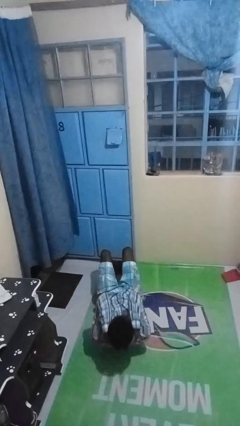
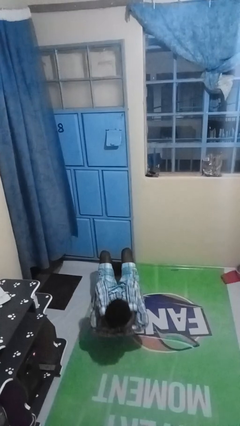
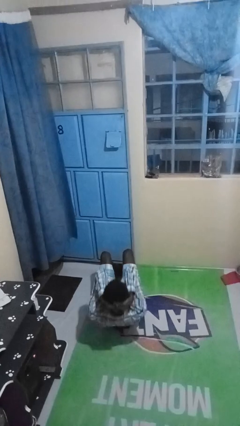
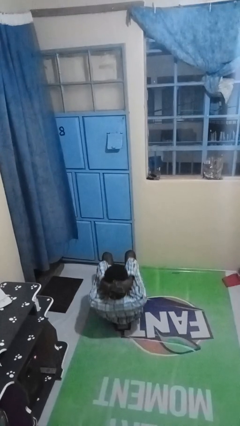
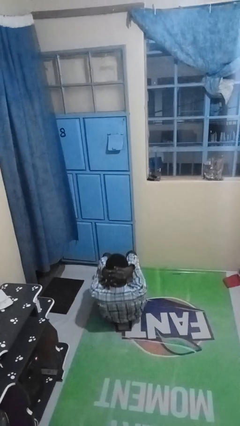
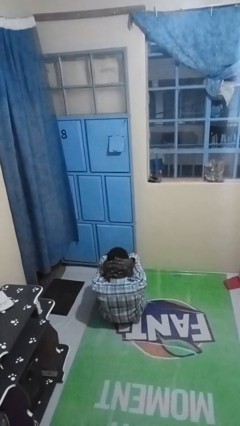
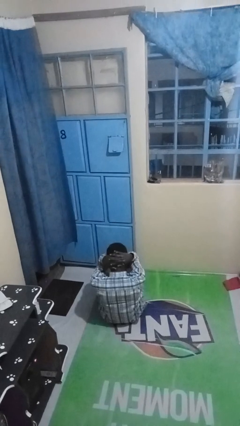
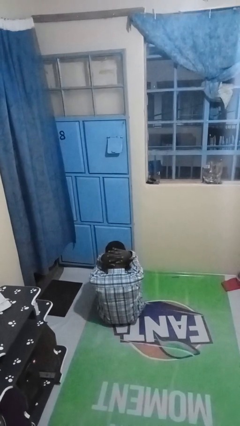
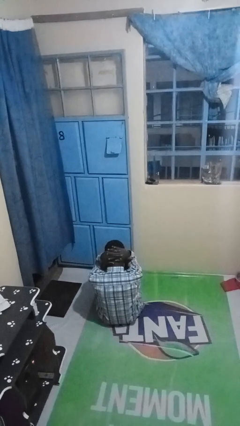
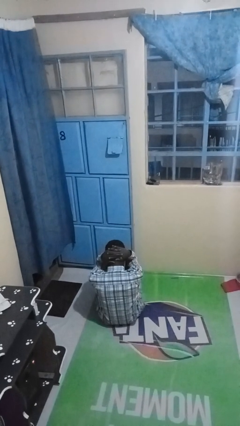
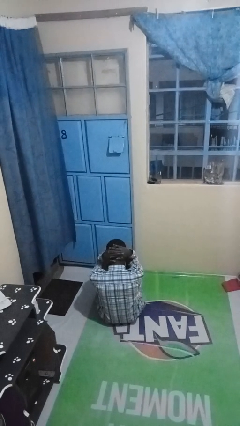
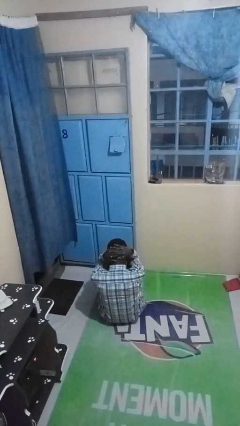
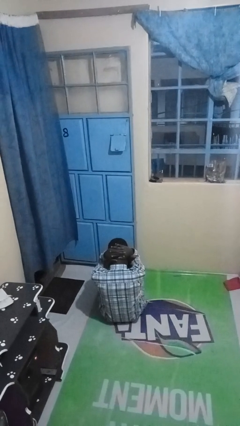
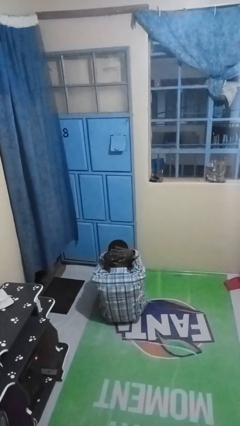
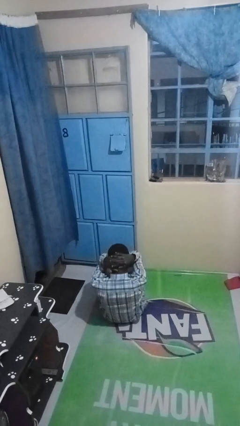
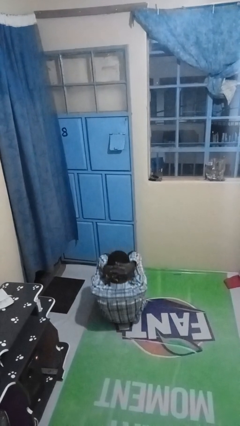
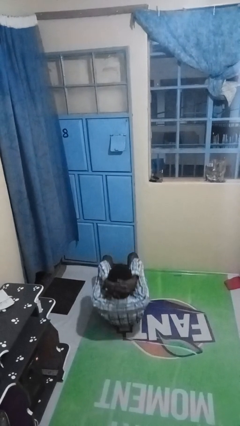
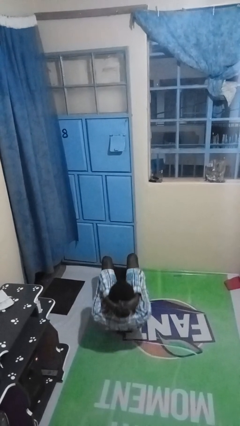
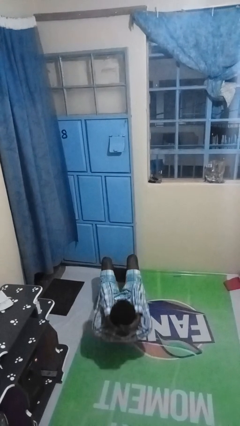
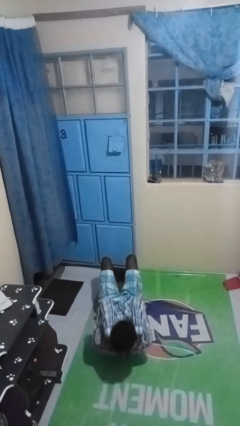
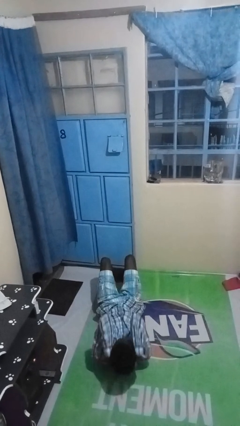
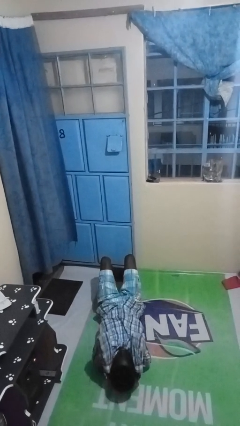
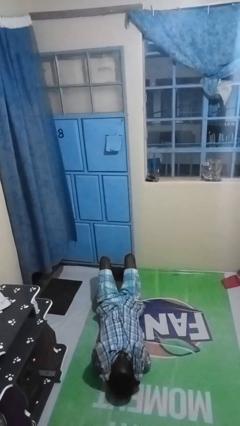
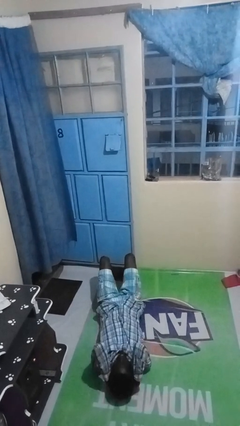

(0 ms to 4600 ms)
person exercises with situp

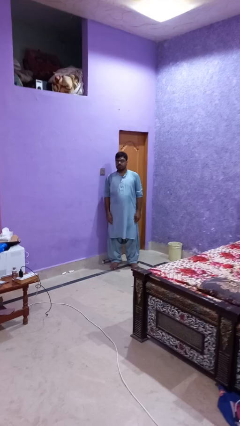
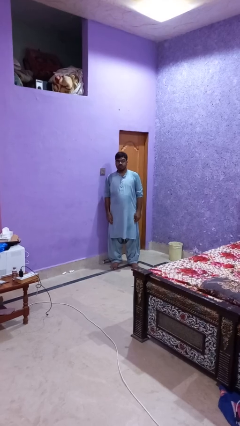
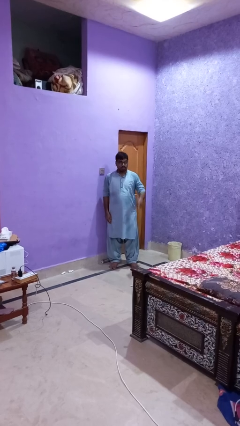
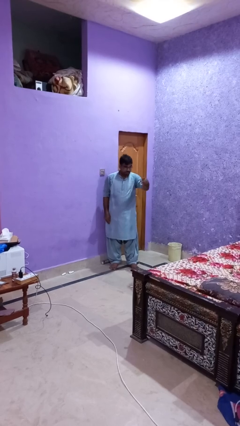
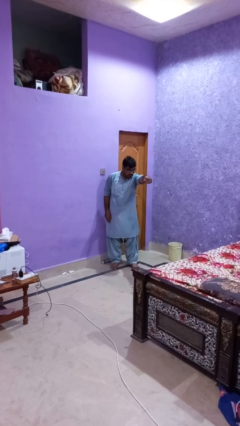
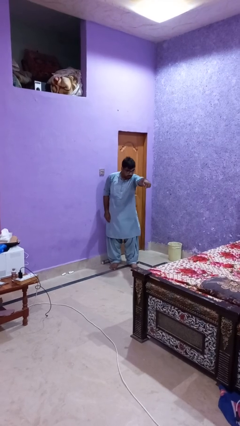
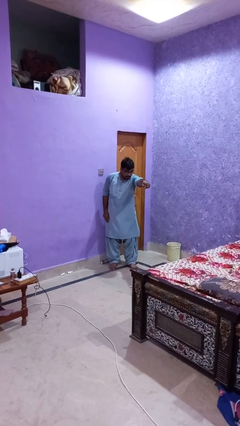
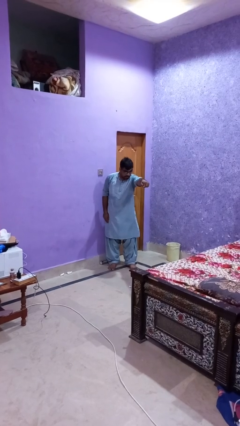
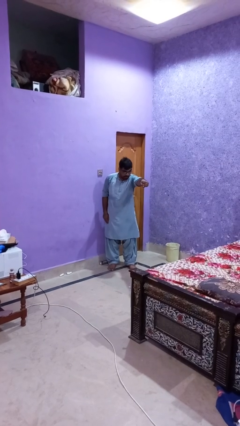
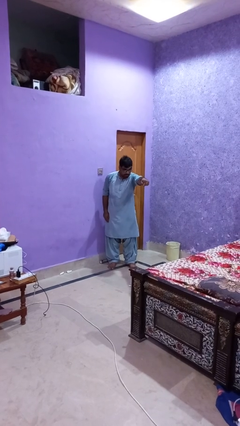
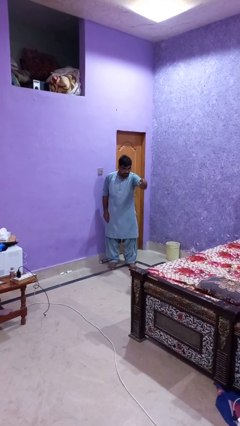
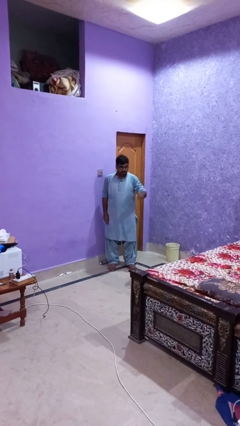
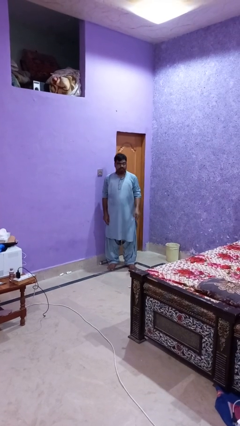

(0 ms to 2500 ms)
person points at person

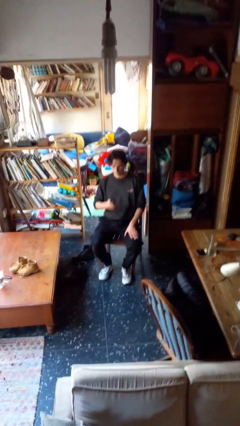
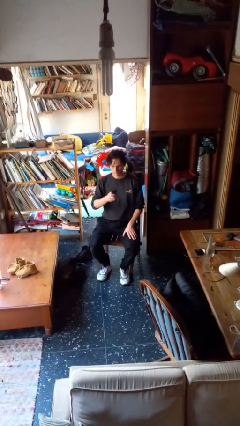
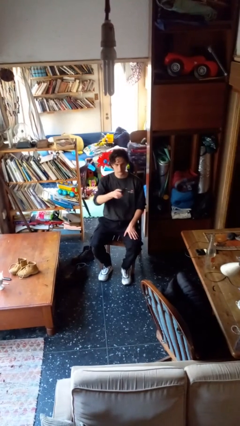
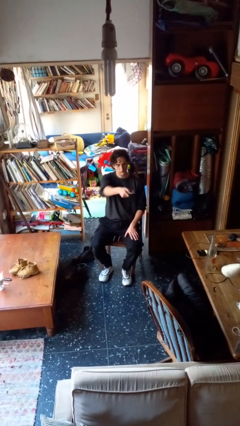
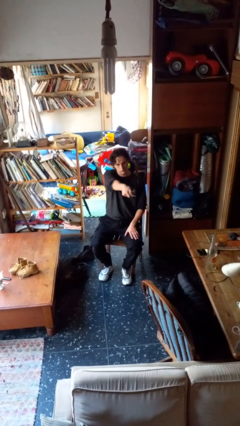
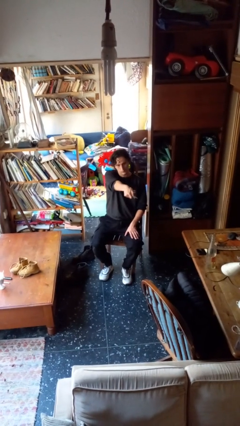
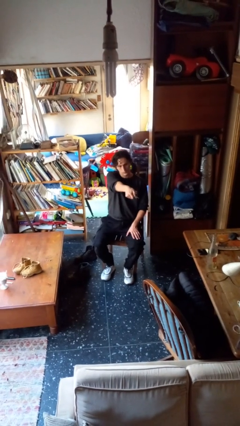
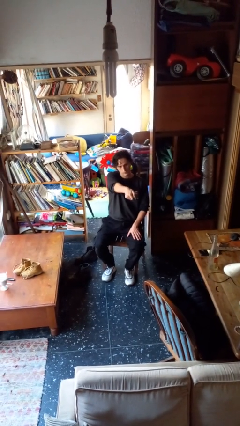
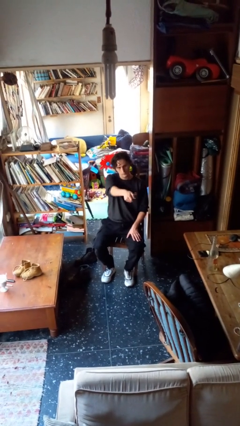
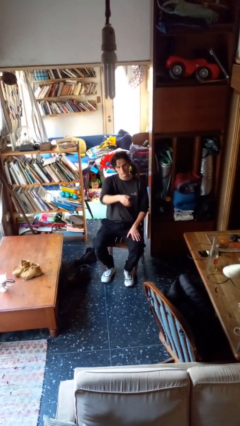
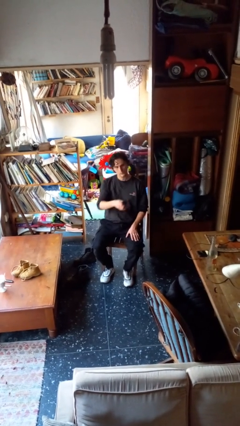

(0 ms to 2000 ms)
person uses television remote

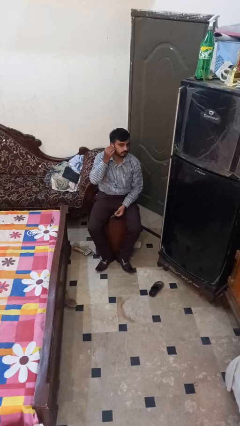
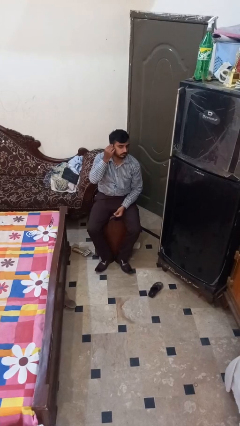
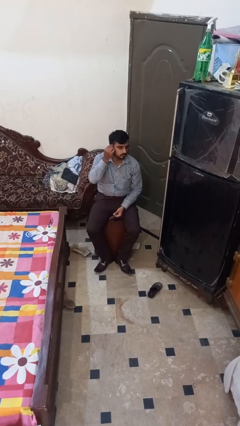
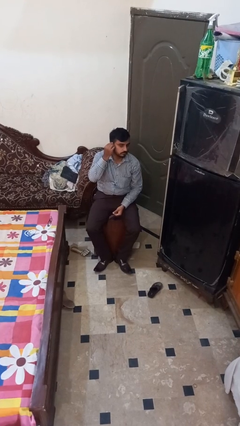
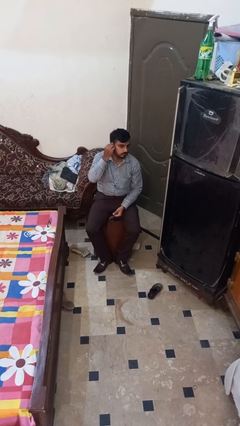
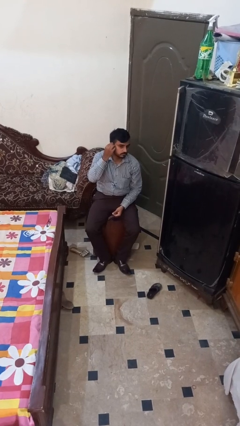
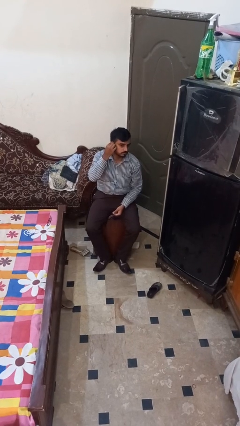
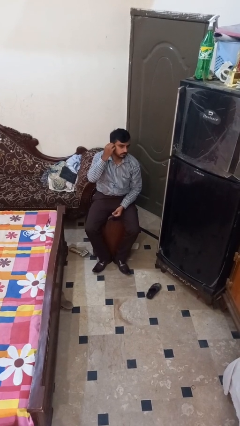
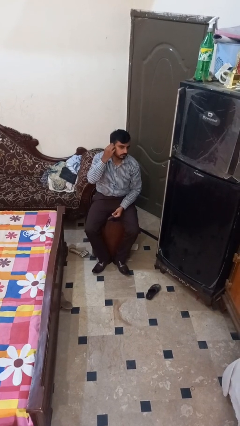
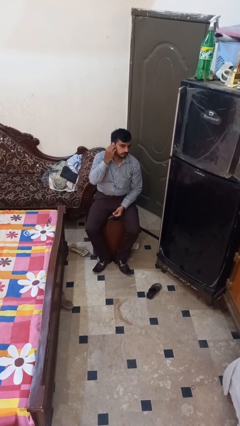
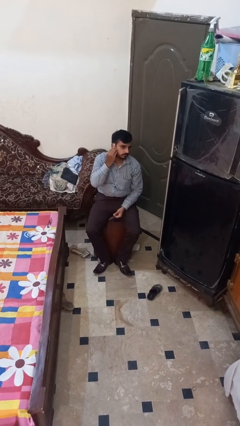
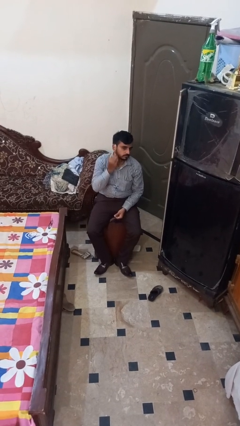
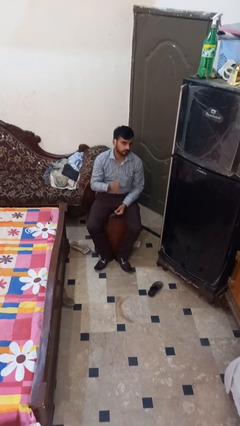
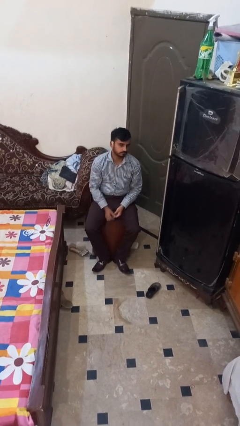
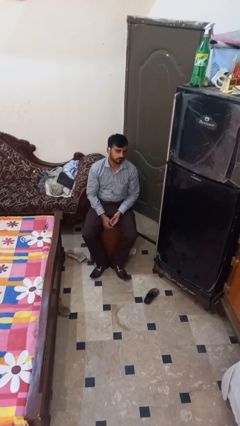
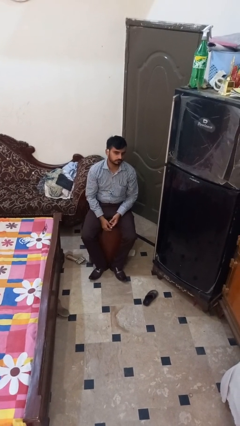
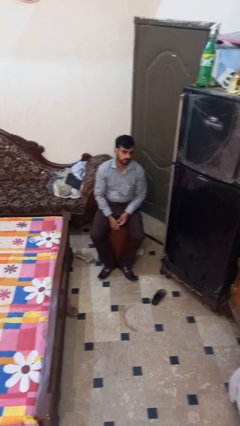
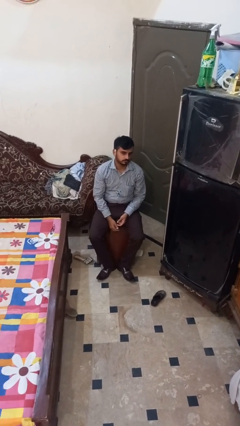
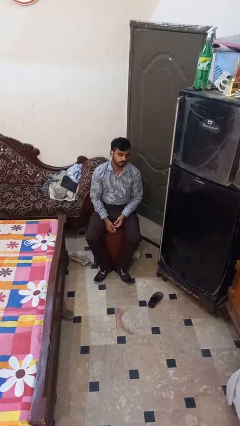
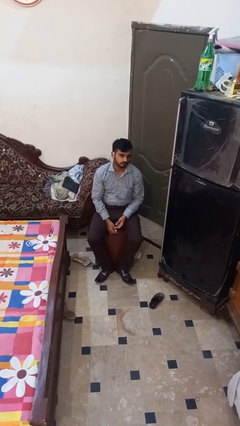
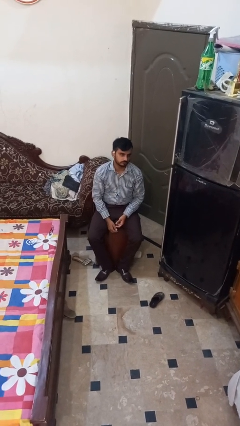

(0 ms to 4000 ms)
person puts on earrings

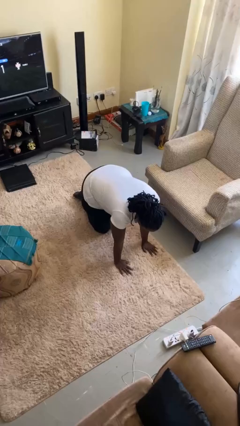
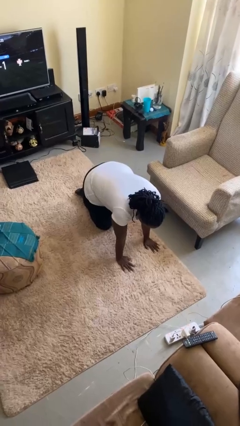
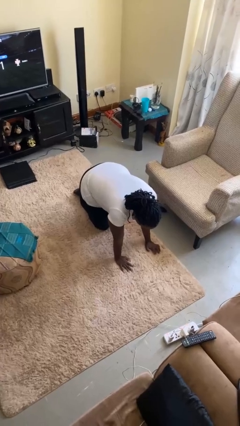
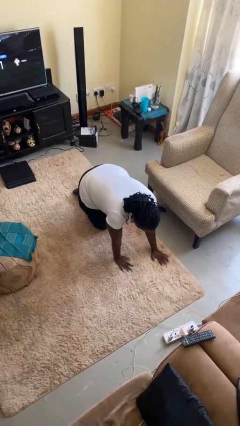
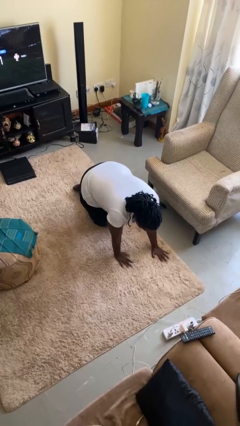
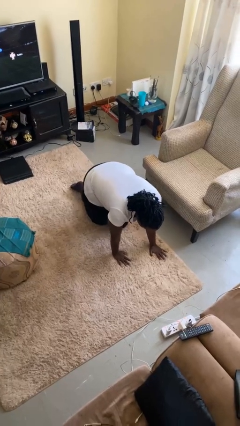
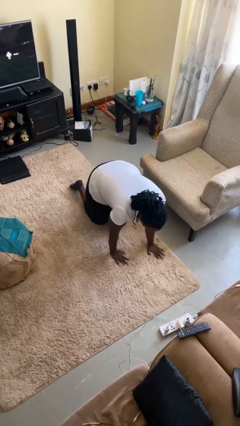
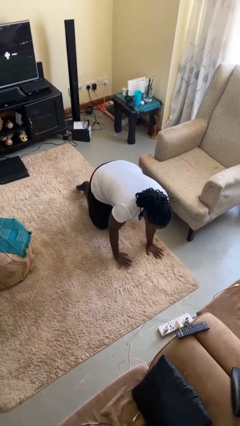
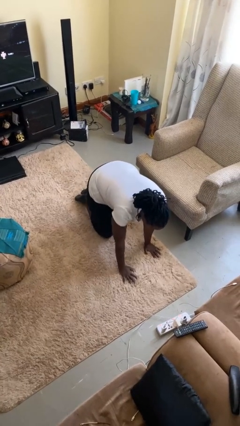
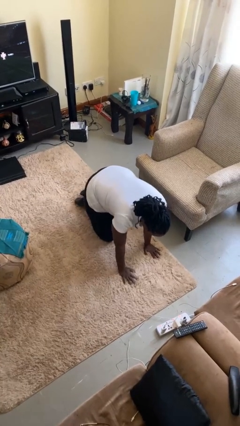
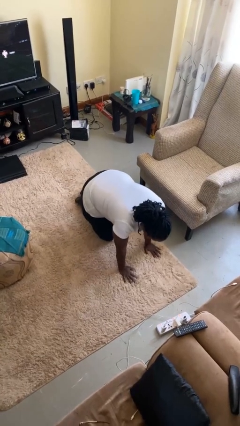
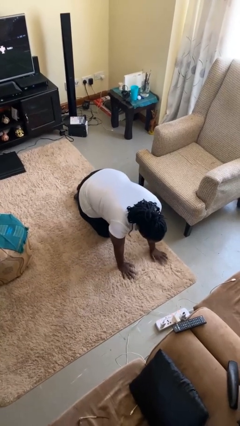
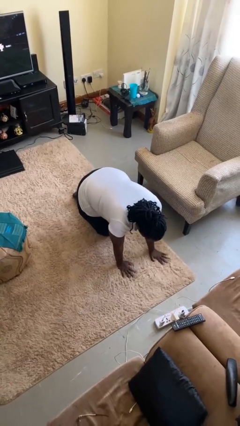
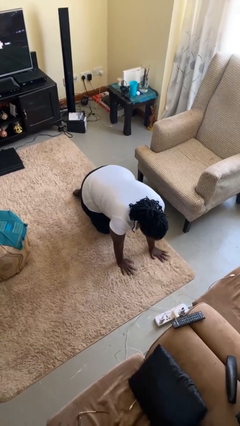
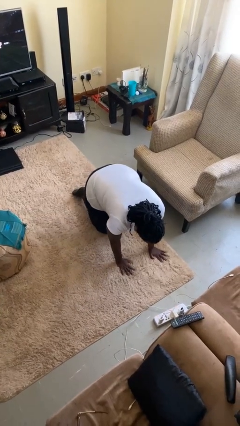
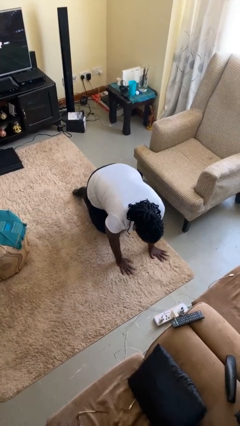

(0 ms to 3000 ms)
person crawls

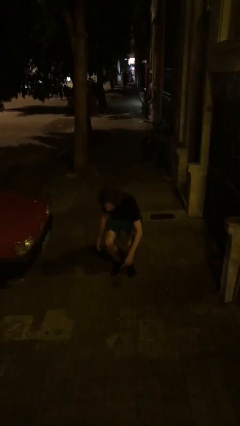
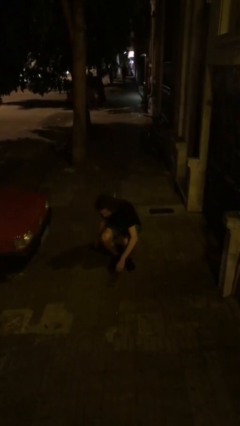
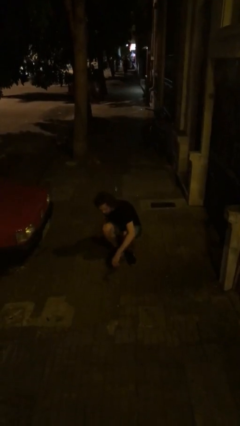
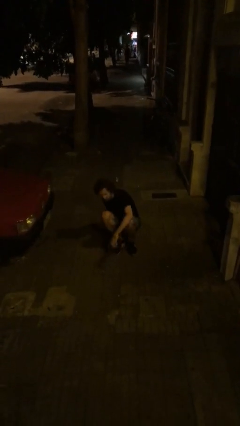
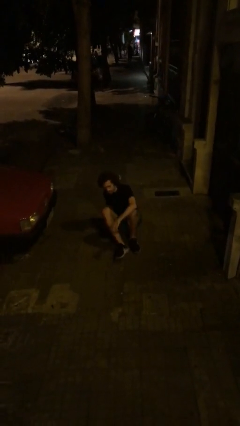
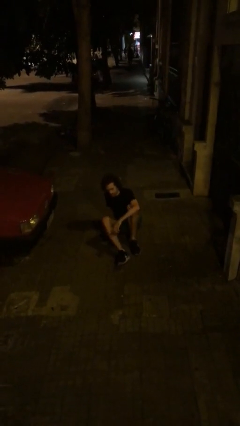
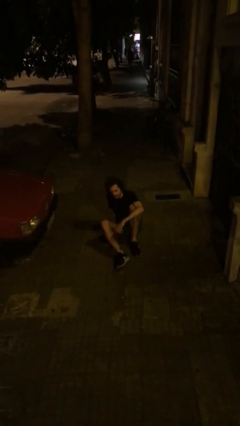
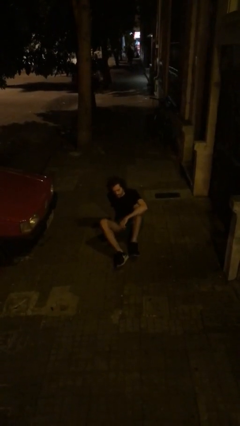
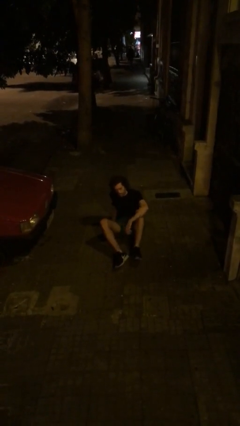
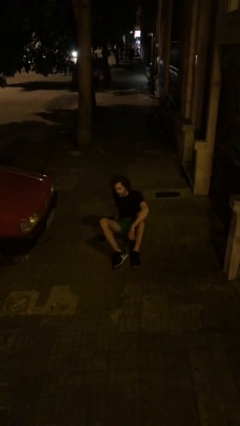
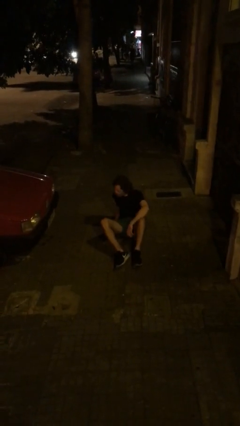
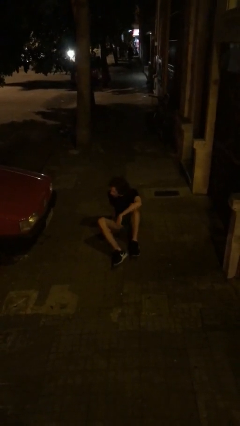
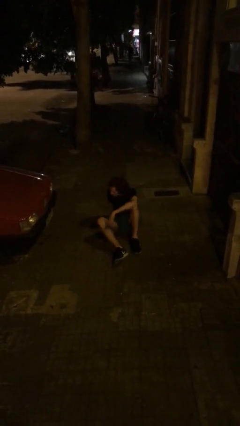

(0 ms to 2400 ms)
person sits down
